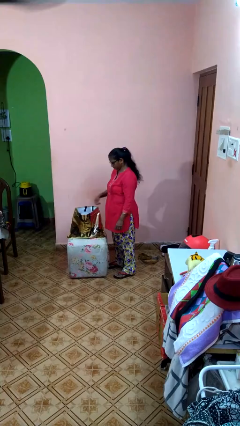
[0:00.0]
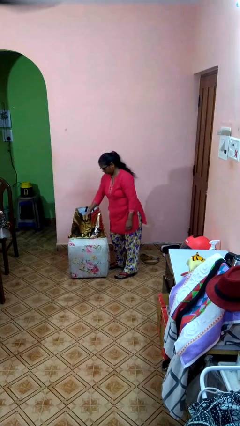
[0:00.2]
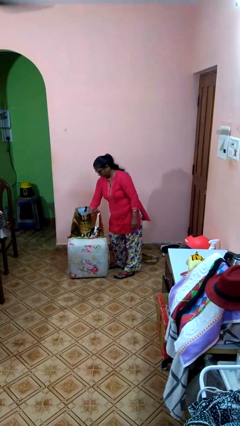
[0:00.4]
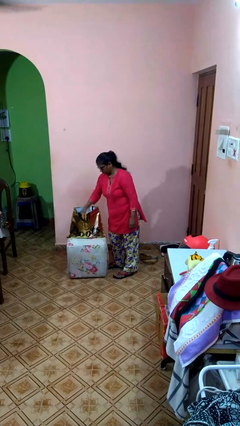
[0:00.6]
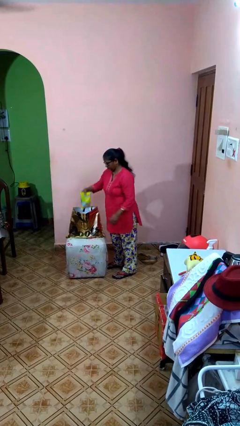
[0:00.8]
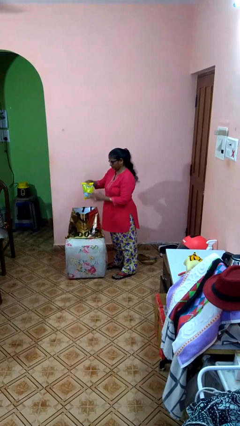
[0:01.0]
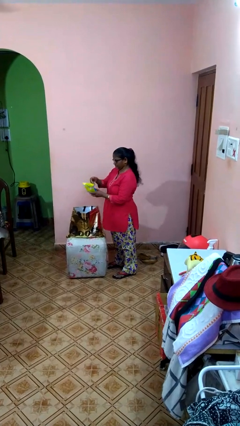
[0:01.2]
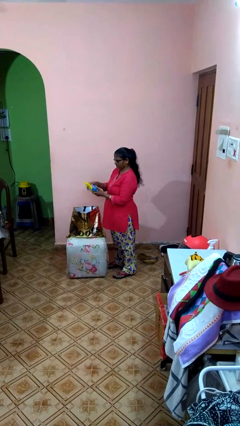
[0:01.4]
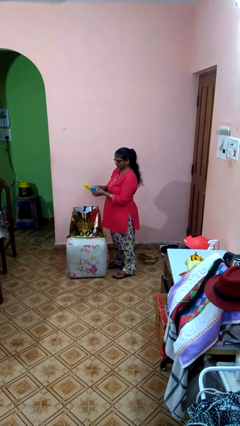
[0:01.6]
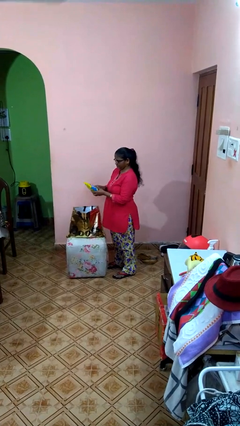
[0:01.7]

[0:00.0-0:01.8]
person takes object from bag

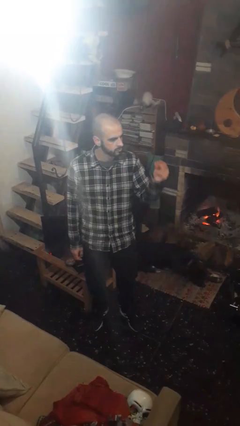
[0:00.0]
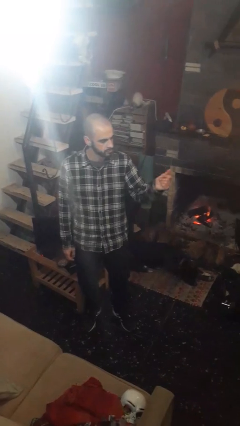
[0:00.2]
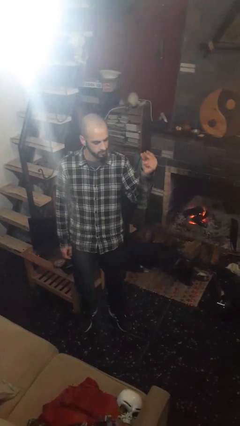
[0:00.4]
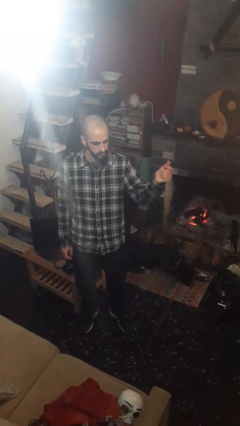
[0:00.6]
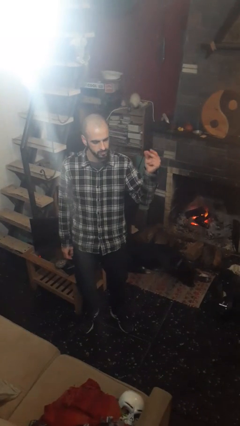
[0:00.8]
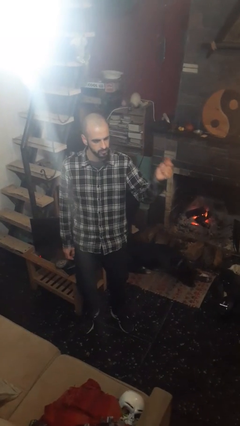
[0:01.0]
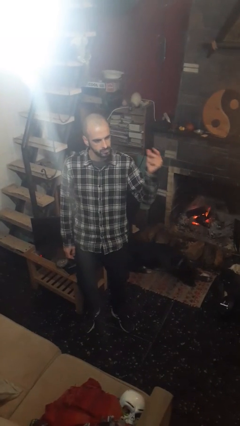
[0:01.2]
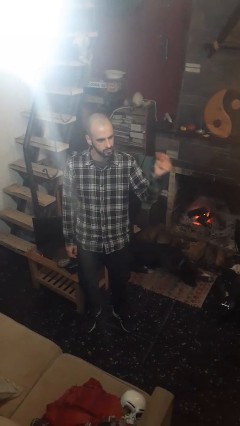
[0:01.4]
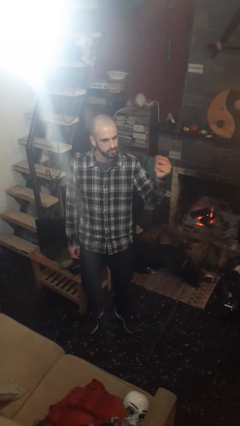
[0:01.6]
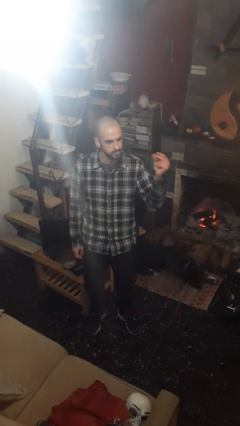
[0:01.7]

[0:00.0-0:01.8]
person snaps fingers

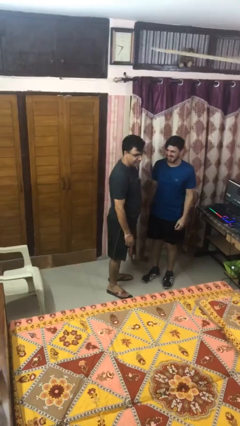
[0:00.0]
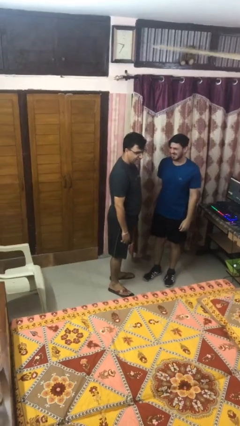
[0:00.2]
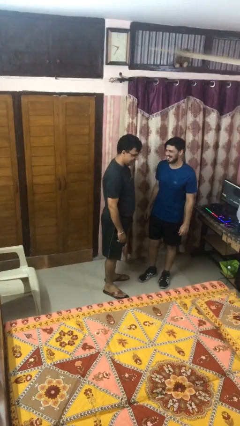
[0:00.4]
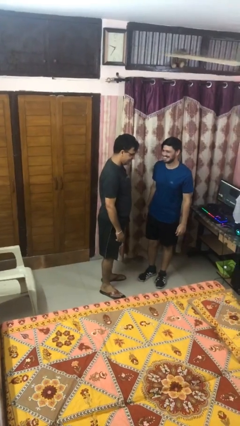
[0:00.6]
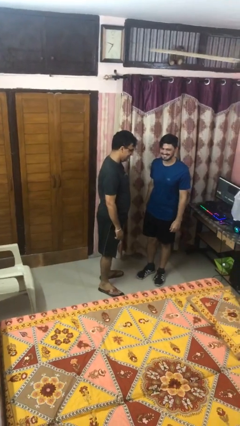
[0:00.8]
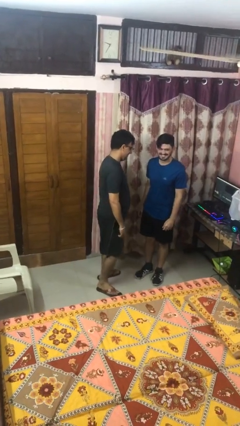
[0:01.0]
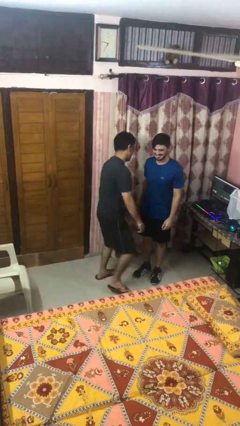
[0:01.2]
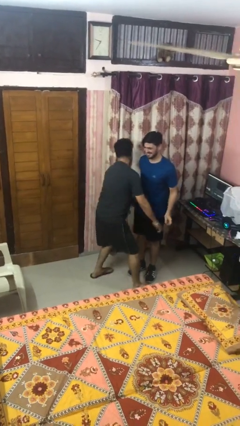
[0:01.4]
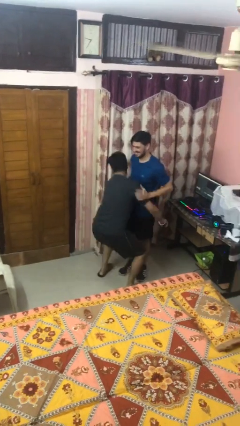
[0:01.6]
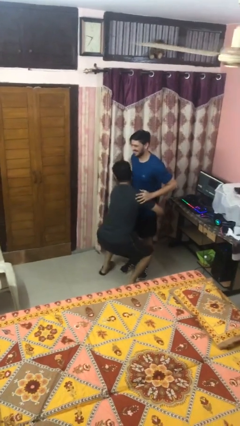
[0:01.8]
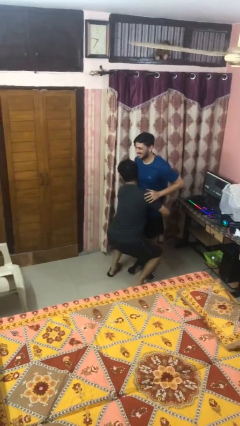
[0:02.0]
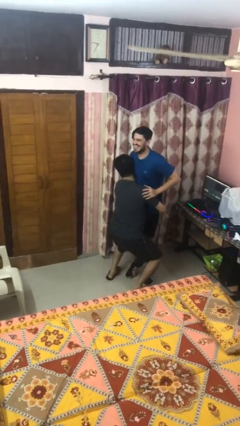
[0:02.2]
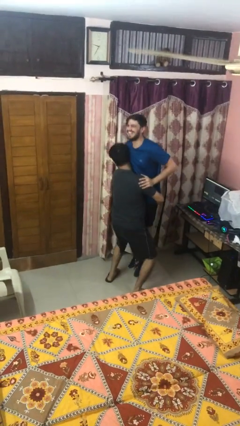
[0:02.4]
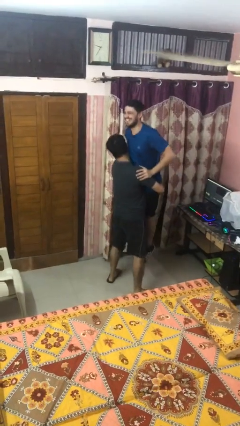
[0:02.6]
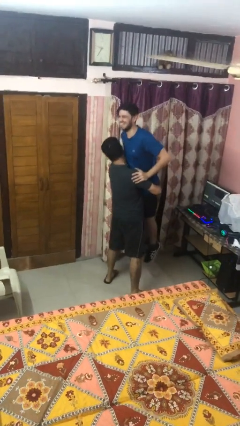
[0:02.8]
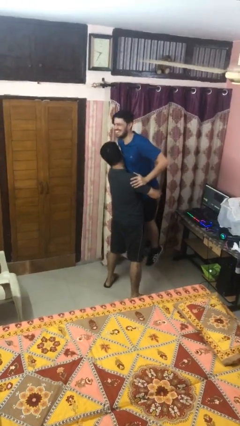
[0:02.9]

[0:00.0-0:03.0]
person picks up person

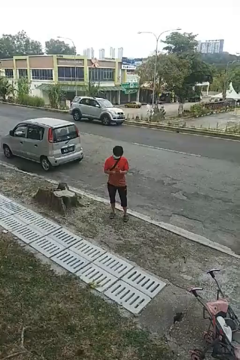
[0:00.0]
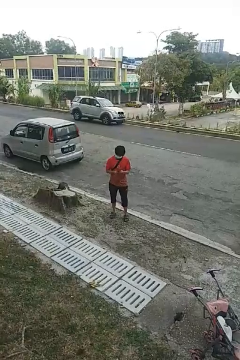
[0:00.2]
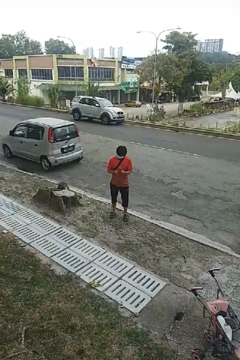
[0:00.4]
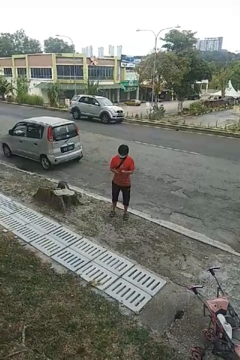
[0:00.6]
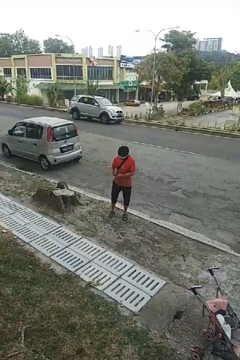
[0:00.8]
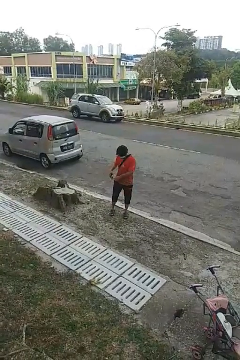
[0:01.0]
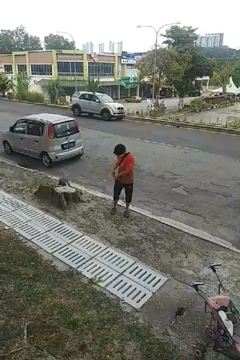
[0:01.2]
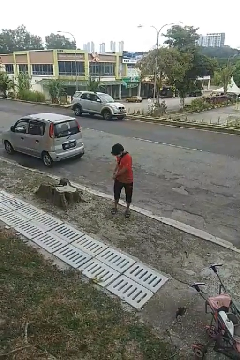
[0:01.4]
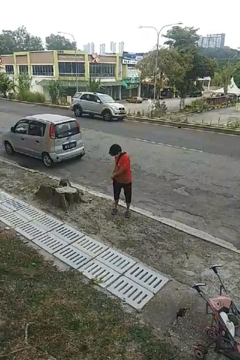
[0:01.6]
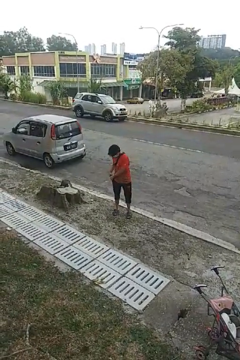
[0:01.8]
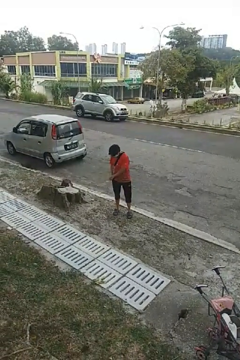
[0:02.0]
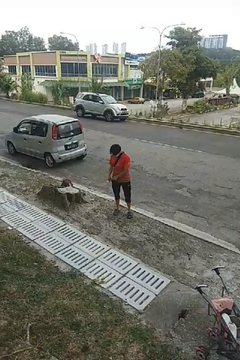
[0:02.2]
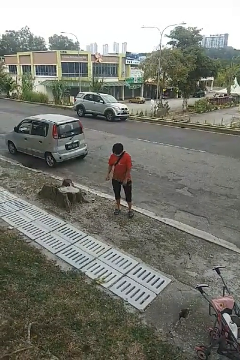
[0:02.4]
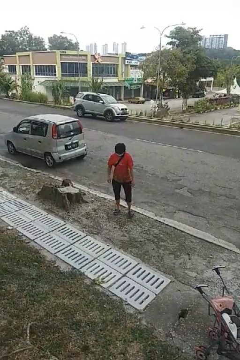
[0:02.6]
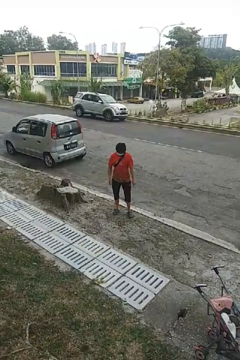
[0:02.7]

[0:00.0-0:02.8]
person puts phone into pocket

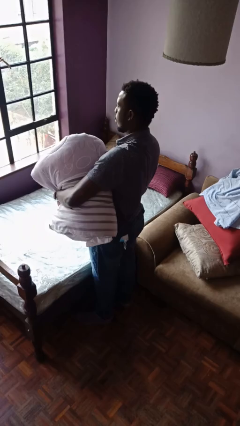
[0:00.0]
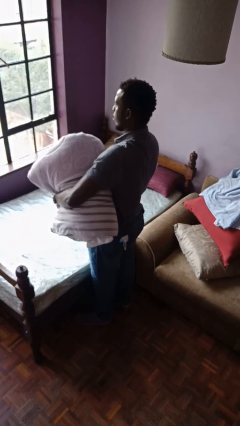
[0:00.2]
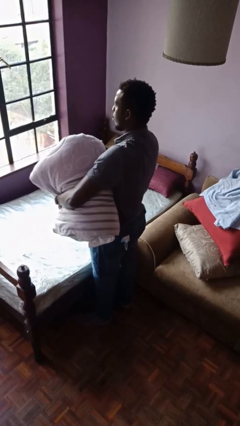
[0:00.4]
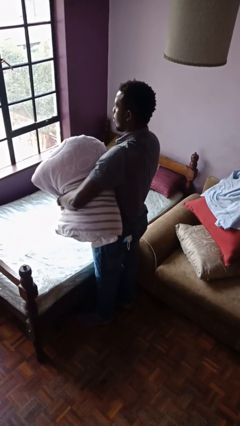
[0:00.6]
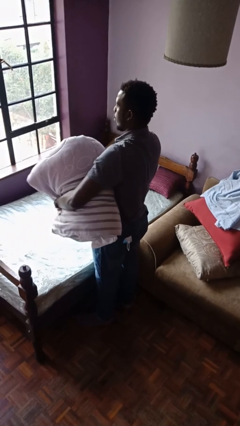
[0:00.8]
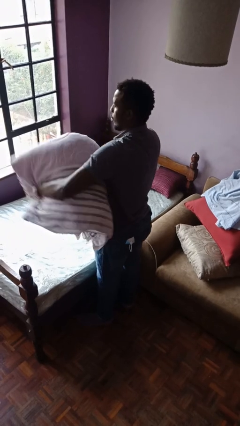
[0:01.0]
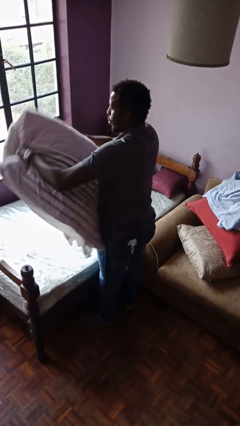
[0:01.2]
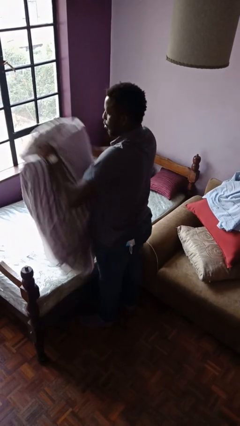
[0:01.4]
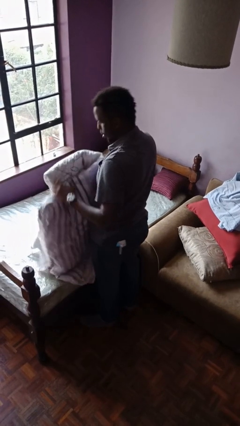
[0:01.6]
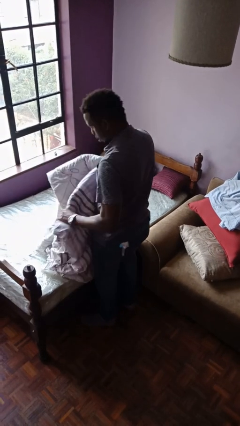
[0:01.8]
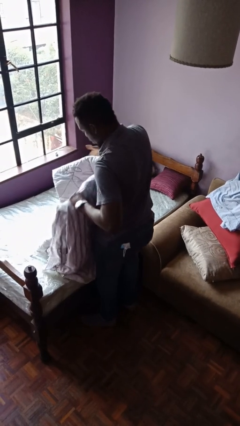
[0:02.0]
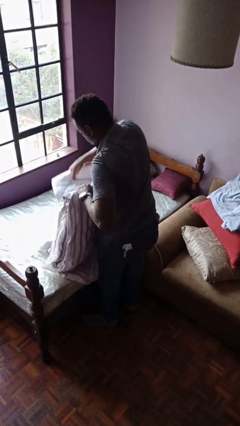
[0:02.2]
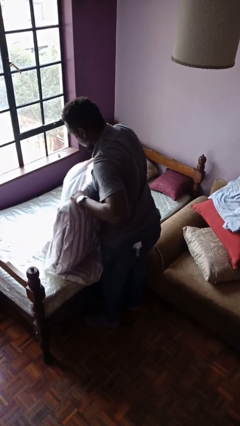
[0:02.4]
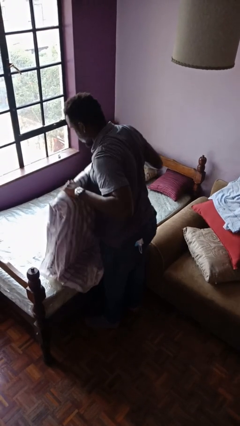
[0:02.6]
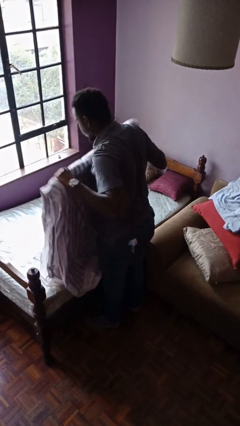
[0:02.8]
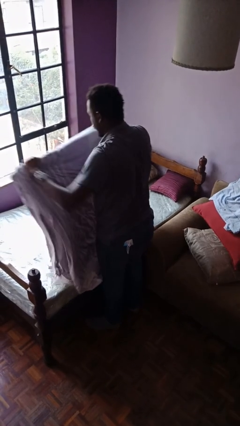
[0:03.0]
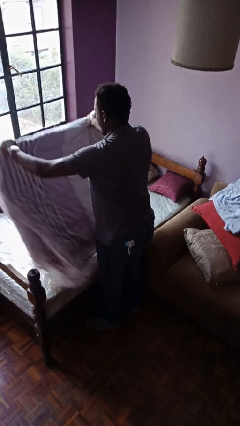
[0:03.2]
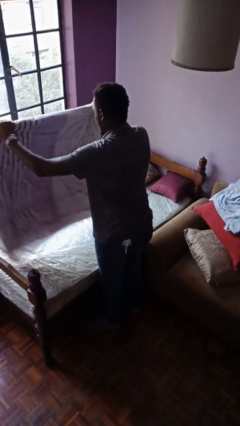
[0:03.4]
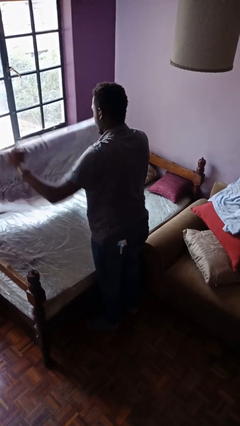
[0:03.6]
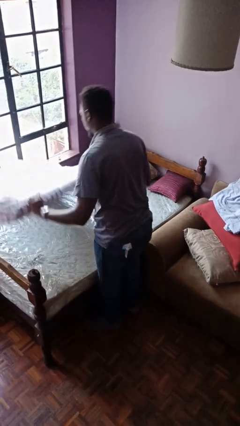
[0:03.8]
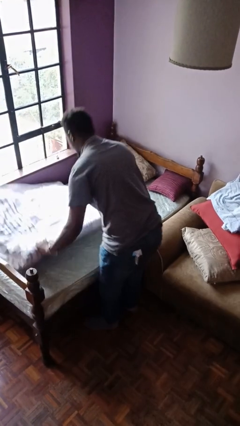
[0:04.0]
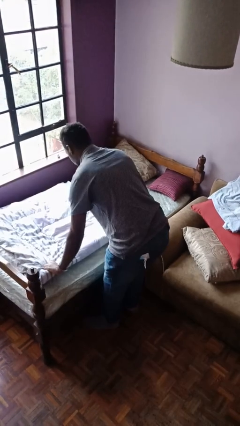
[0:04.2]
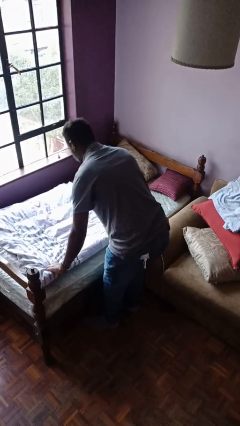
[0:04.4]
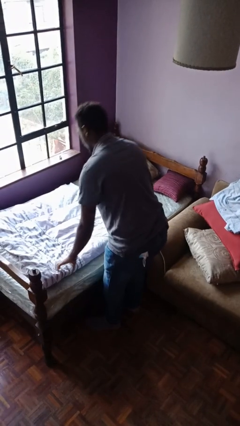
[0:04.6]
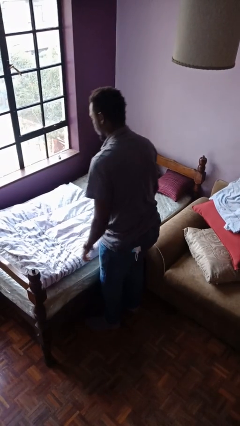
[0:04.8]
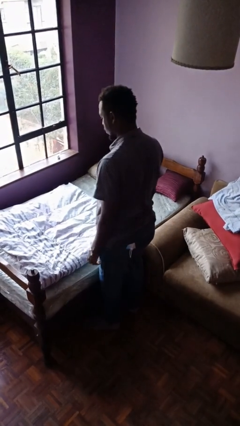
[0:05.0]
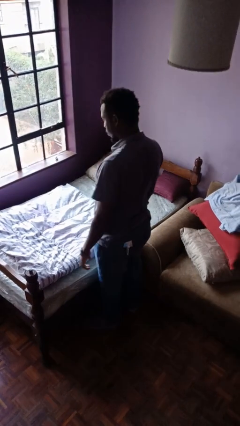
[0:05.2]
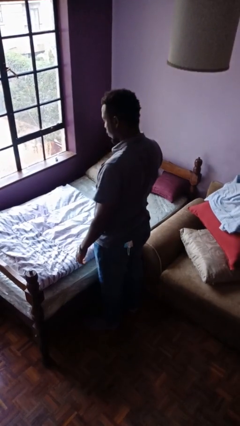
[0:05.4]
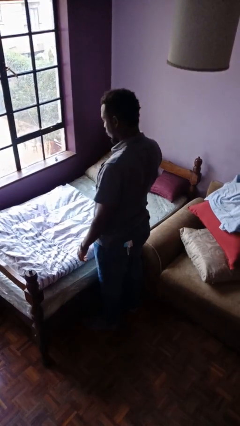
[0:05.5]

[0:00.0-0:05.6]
person unfolds blanket

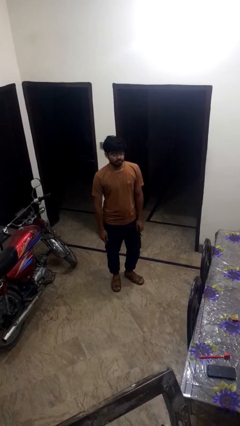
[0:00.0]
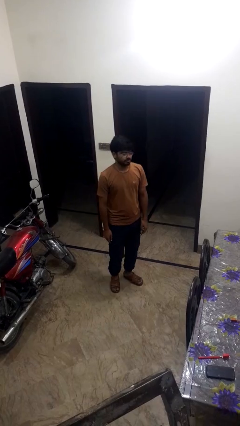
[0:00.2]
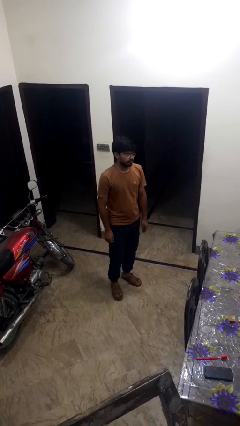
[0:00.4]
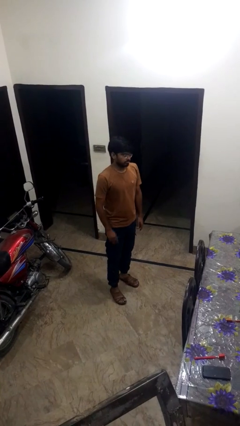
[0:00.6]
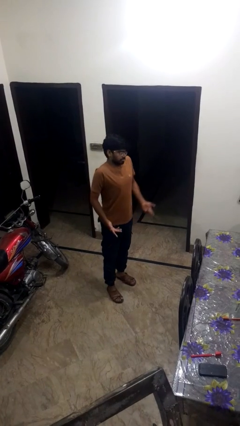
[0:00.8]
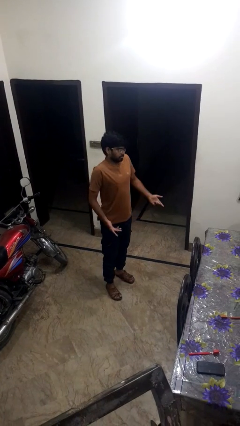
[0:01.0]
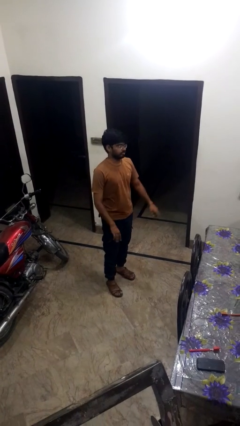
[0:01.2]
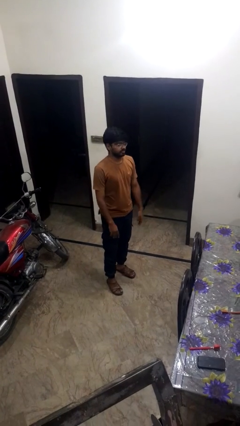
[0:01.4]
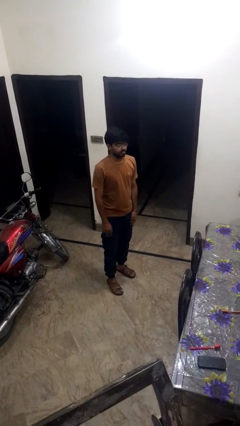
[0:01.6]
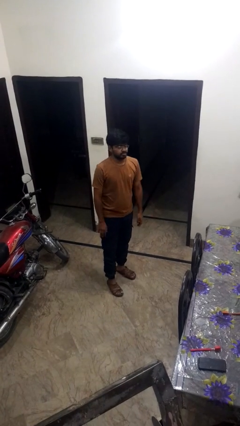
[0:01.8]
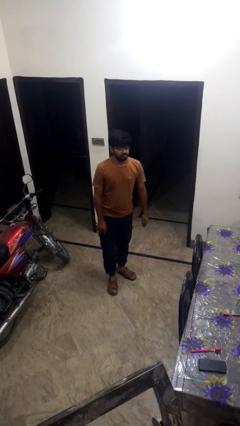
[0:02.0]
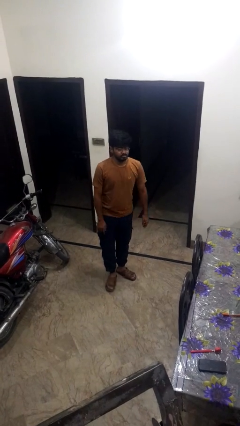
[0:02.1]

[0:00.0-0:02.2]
person shrugs

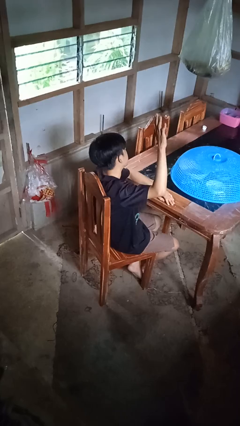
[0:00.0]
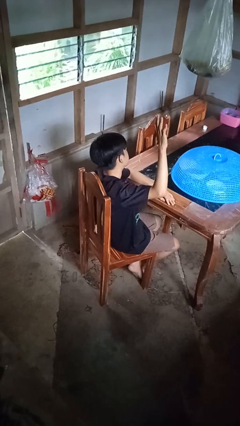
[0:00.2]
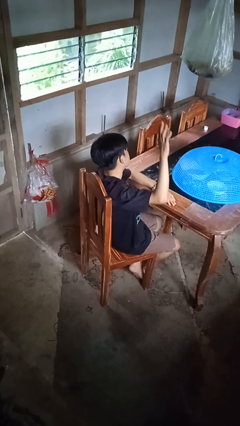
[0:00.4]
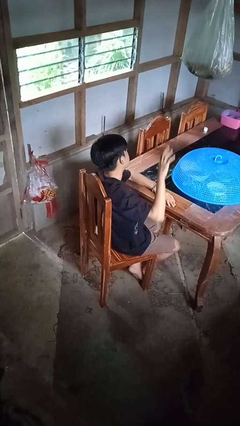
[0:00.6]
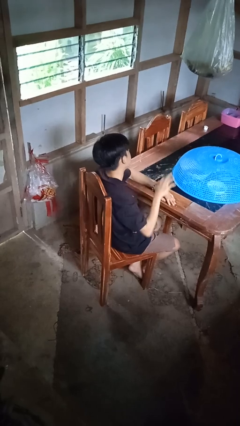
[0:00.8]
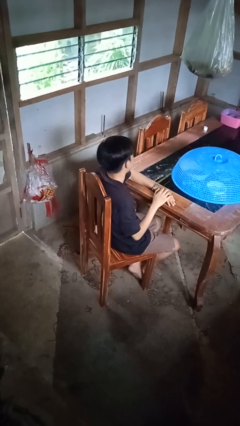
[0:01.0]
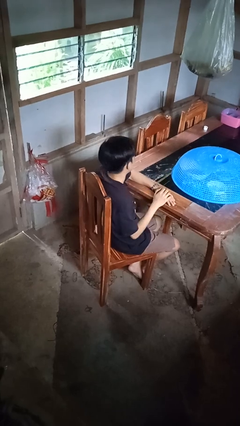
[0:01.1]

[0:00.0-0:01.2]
person gestures lower hand
